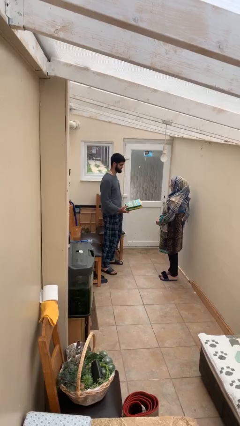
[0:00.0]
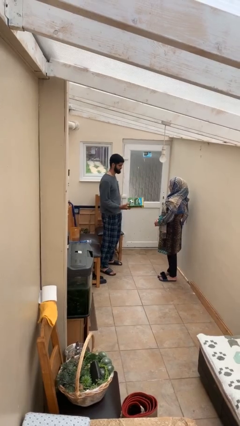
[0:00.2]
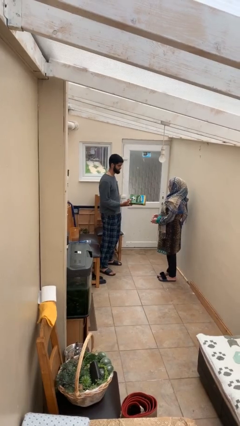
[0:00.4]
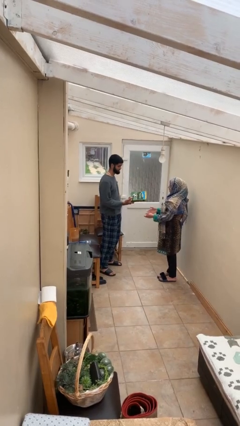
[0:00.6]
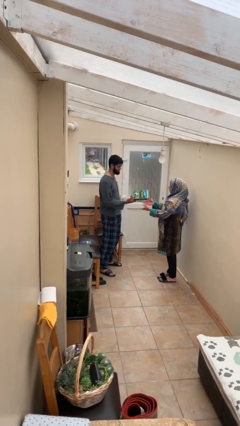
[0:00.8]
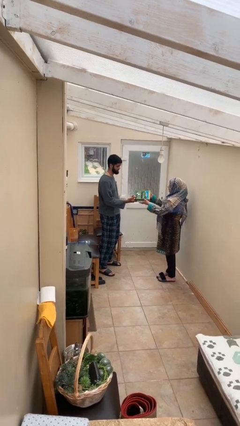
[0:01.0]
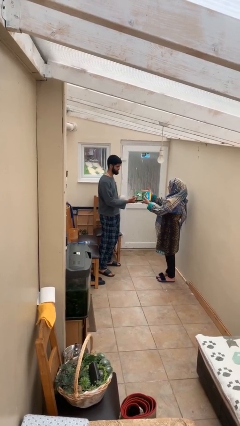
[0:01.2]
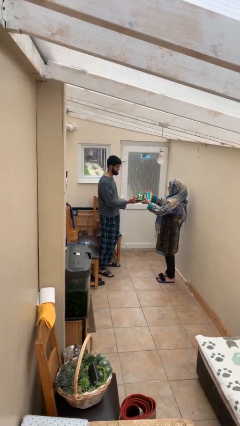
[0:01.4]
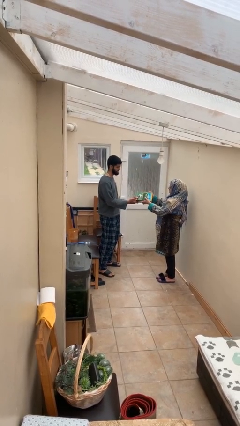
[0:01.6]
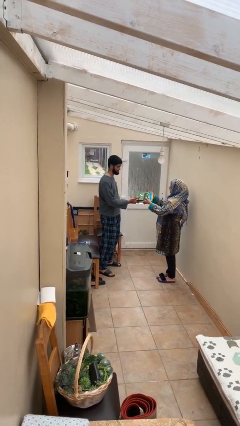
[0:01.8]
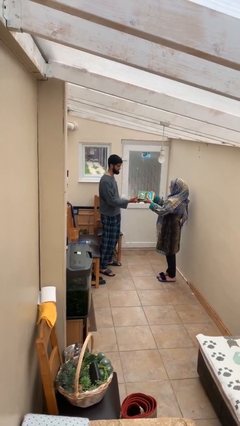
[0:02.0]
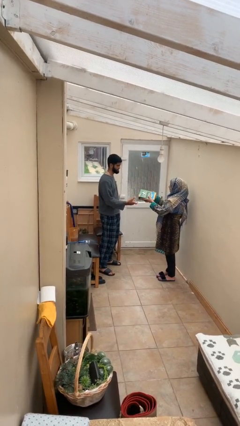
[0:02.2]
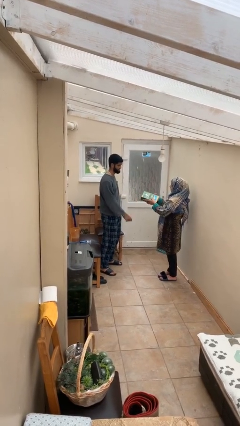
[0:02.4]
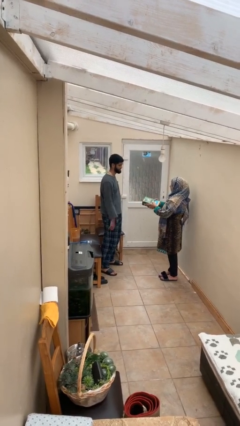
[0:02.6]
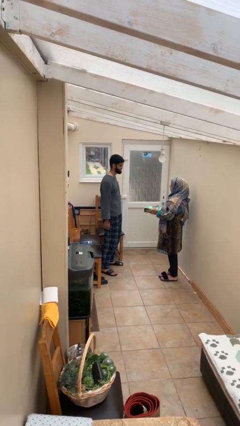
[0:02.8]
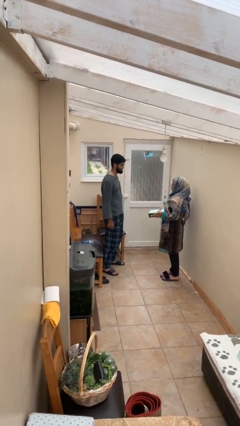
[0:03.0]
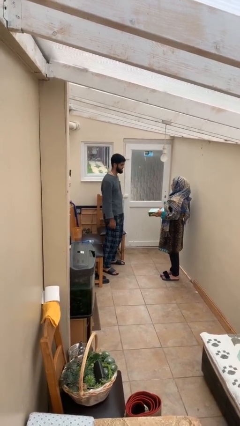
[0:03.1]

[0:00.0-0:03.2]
person transfers object to person

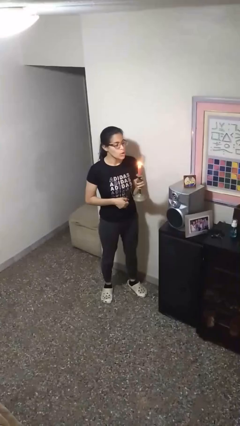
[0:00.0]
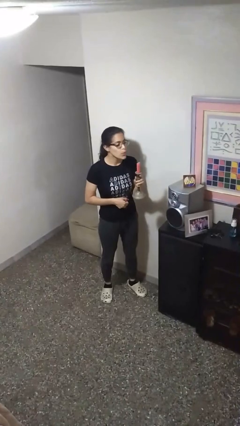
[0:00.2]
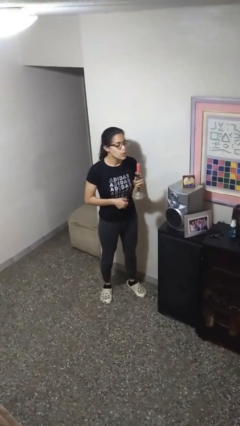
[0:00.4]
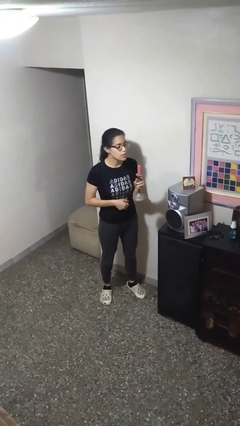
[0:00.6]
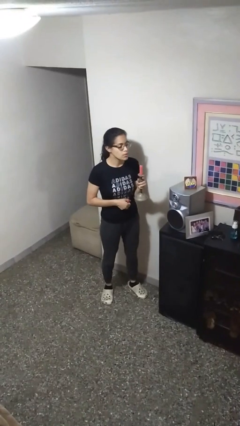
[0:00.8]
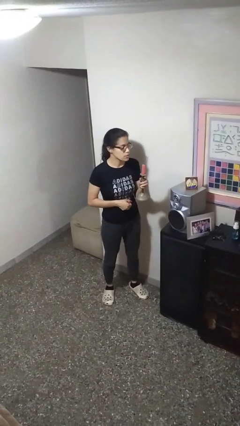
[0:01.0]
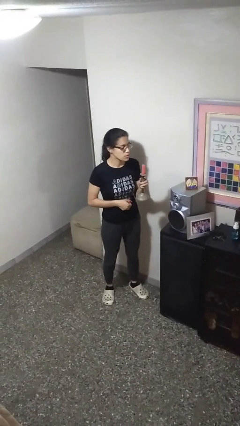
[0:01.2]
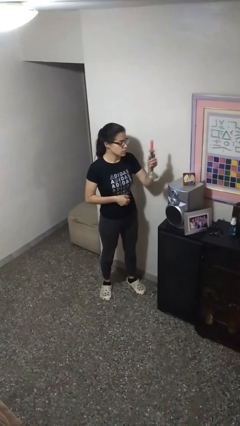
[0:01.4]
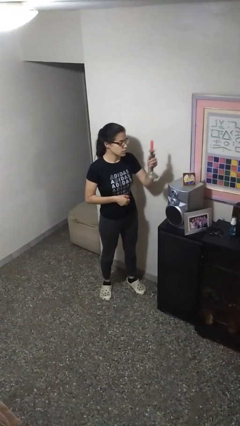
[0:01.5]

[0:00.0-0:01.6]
person extinguishes candle

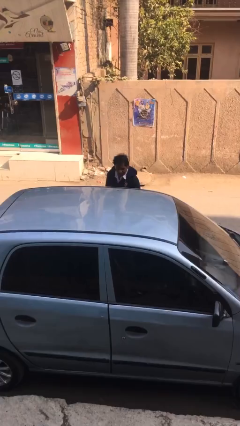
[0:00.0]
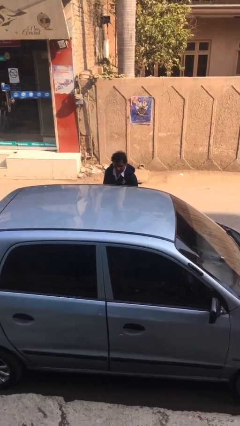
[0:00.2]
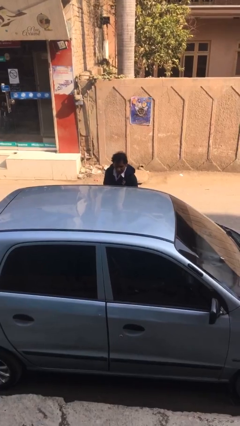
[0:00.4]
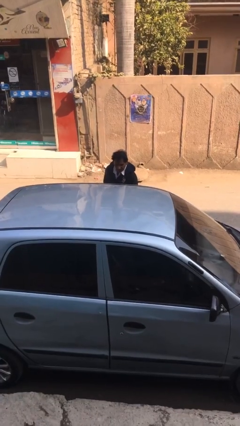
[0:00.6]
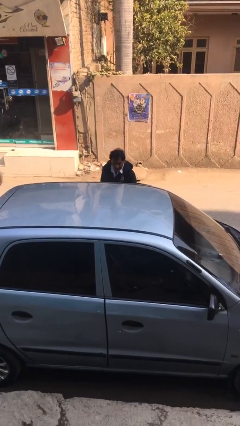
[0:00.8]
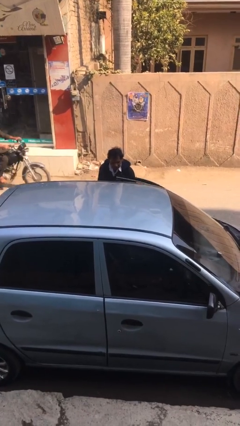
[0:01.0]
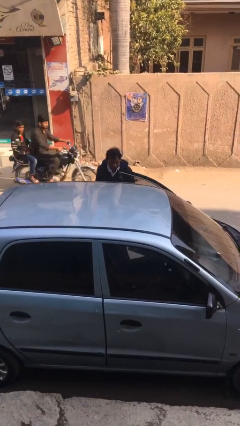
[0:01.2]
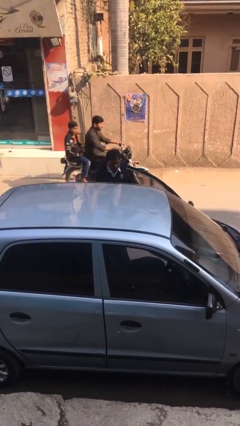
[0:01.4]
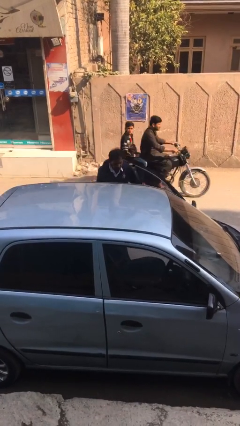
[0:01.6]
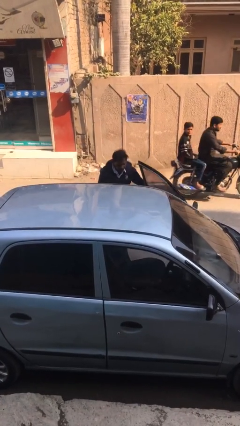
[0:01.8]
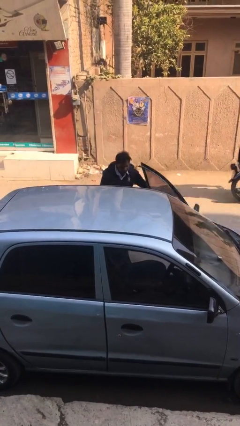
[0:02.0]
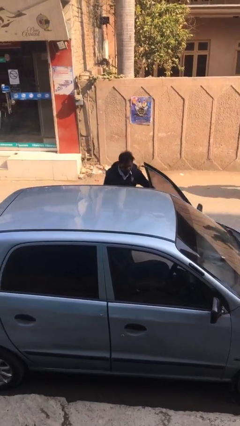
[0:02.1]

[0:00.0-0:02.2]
person opens car door

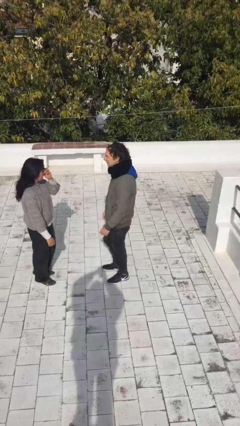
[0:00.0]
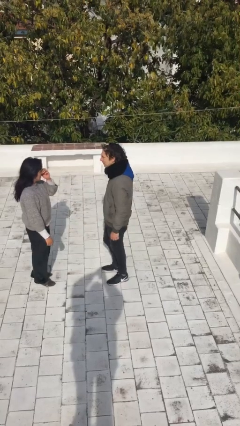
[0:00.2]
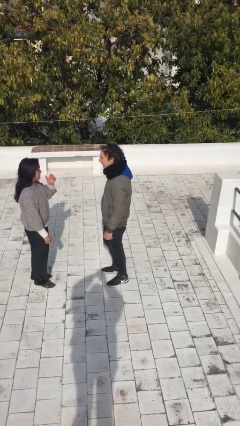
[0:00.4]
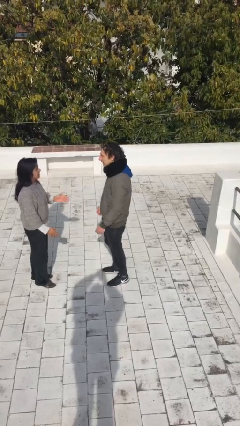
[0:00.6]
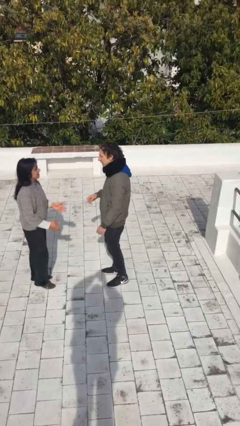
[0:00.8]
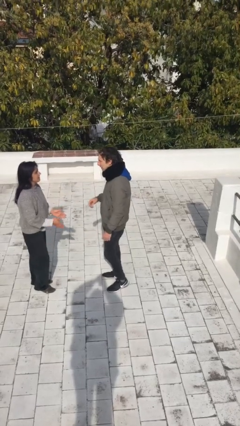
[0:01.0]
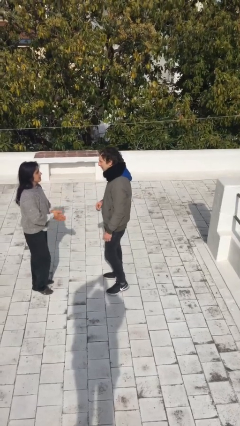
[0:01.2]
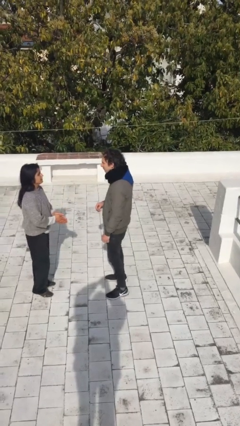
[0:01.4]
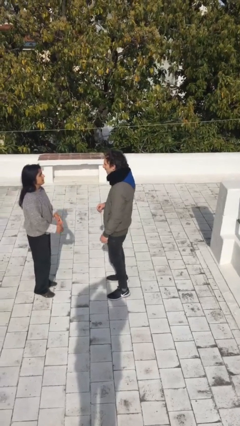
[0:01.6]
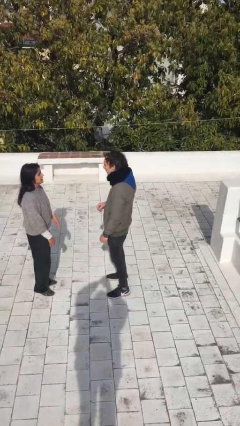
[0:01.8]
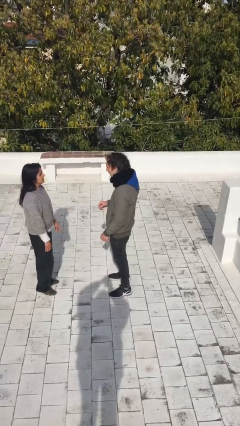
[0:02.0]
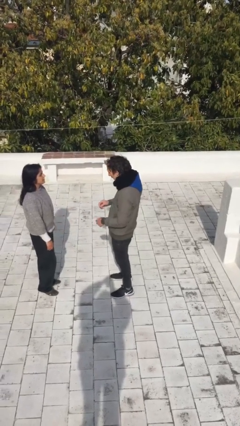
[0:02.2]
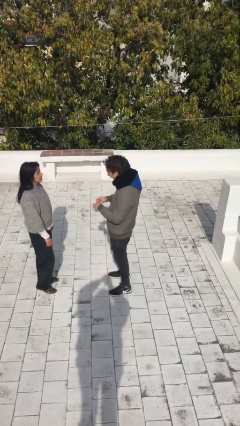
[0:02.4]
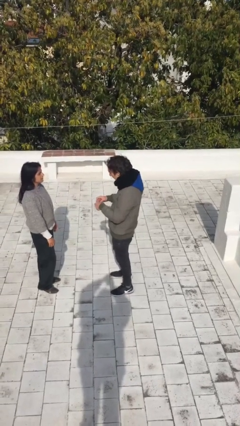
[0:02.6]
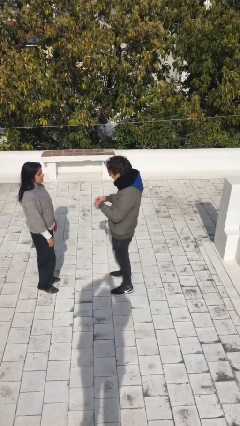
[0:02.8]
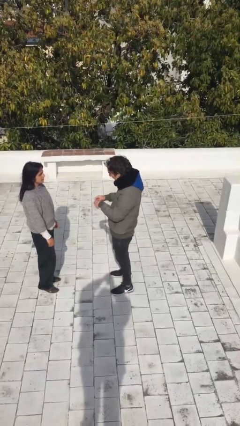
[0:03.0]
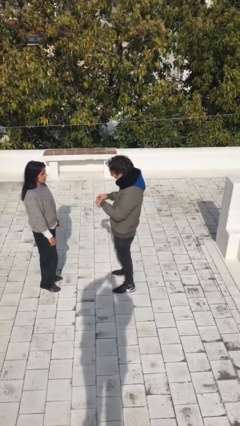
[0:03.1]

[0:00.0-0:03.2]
person talks to person

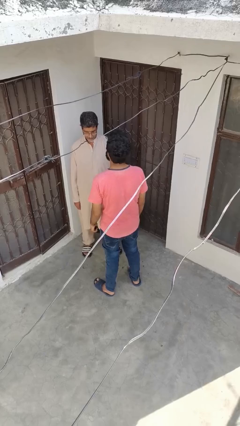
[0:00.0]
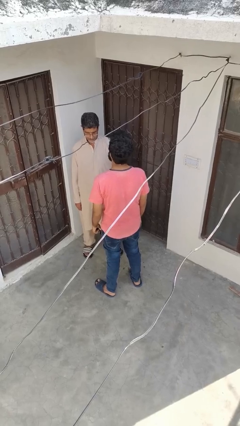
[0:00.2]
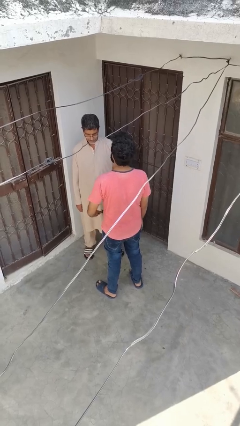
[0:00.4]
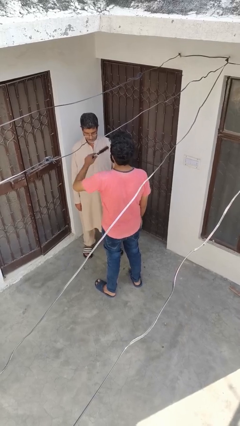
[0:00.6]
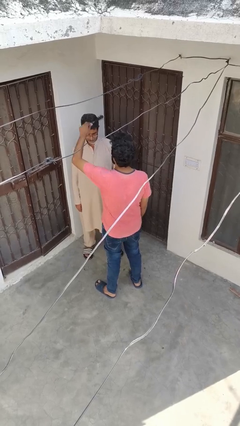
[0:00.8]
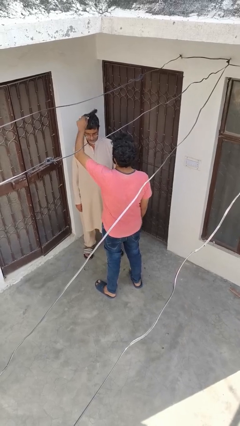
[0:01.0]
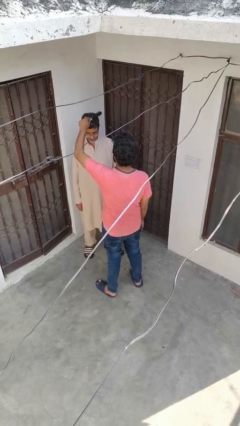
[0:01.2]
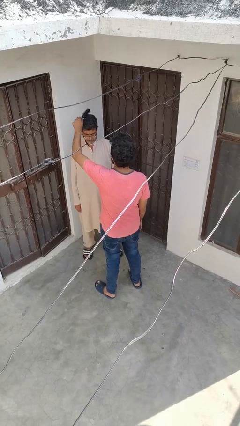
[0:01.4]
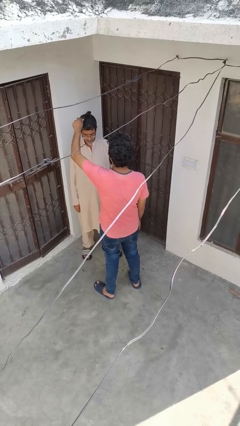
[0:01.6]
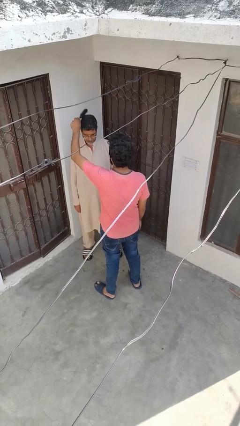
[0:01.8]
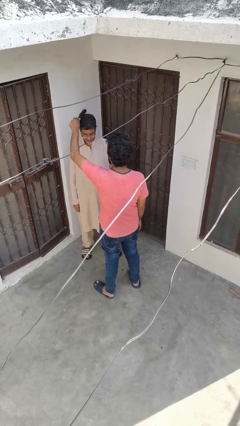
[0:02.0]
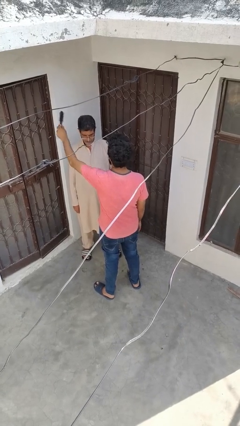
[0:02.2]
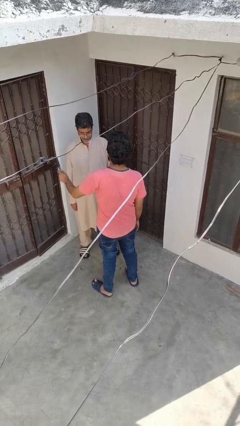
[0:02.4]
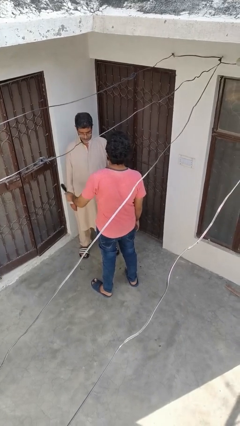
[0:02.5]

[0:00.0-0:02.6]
person brushes hair of person

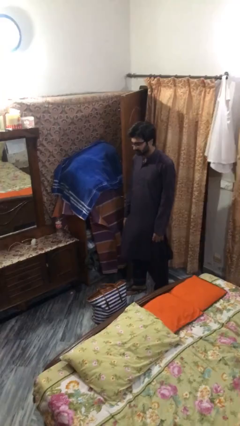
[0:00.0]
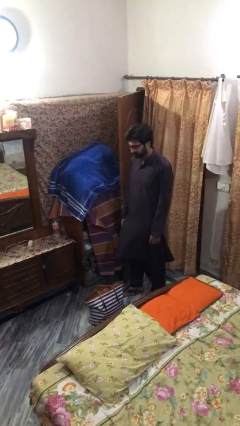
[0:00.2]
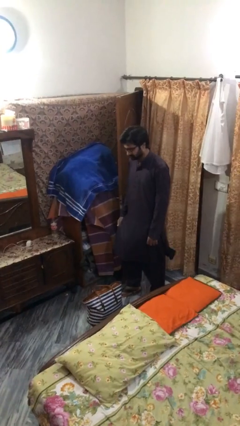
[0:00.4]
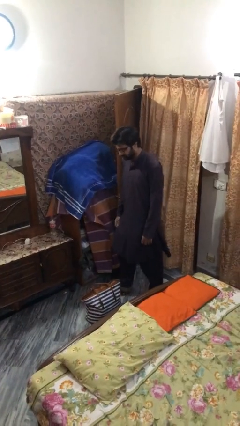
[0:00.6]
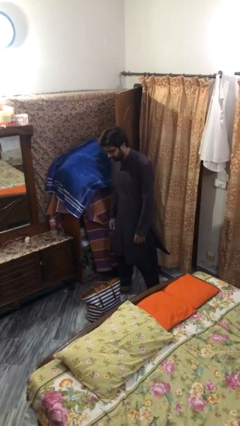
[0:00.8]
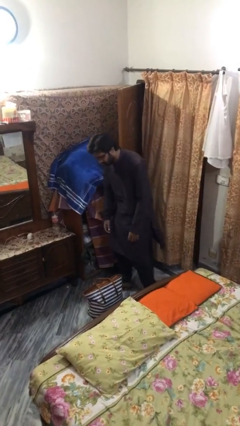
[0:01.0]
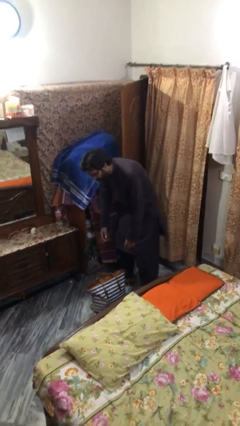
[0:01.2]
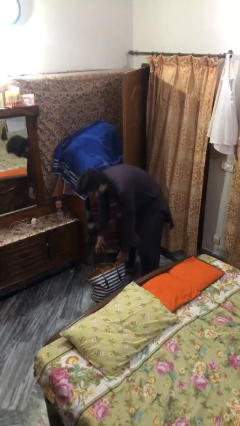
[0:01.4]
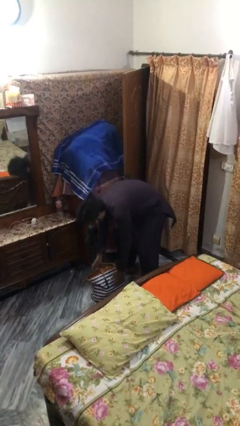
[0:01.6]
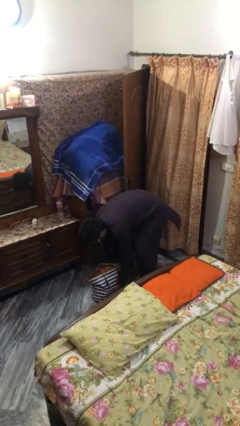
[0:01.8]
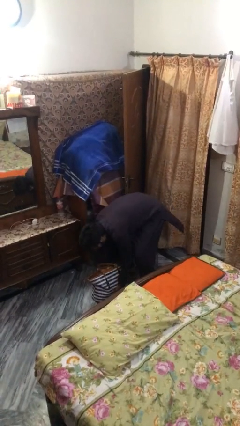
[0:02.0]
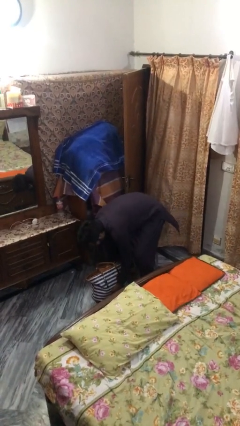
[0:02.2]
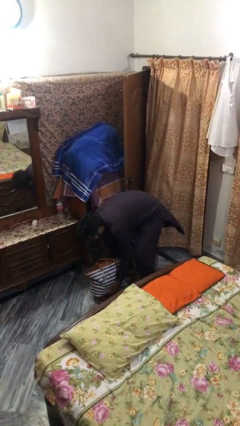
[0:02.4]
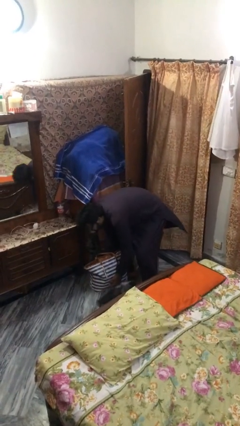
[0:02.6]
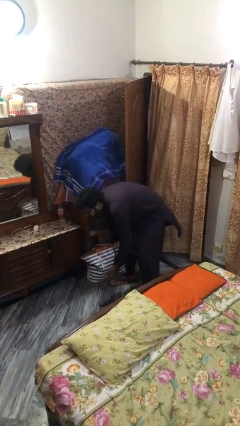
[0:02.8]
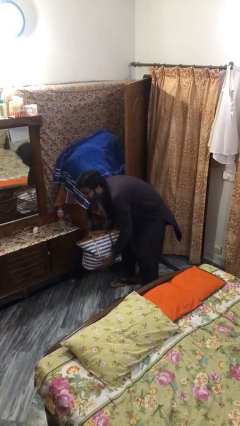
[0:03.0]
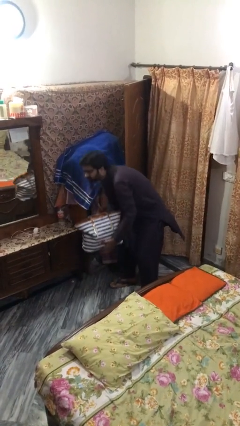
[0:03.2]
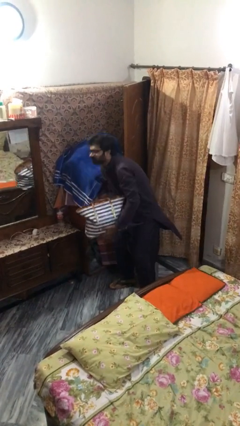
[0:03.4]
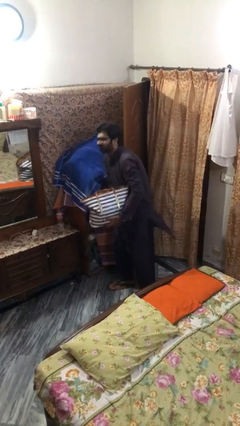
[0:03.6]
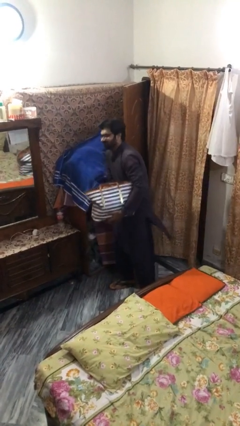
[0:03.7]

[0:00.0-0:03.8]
person picks up object from floor

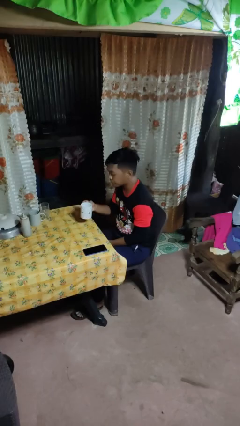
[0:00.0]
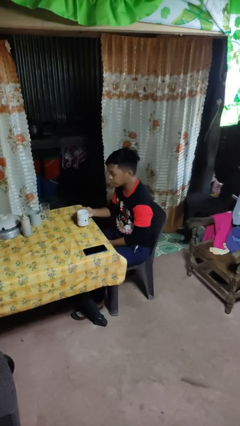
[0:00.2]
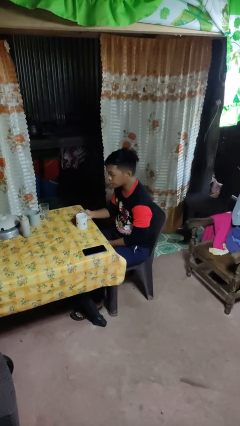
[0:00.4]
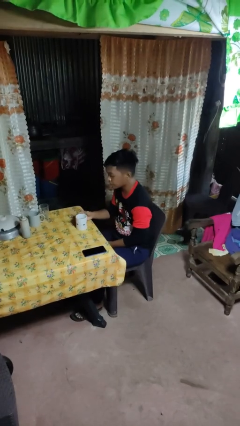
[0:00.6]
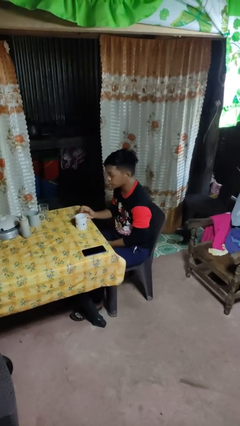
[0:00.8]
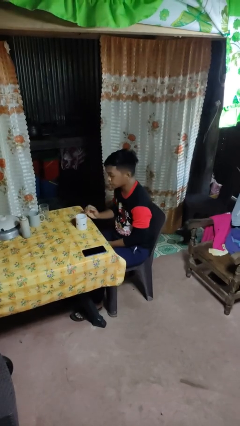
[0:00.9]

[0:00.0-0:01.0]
person puts down object on table
